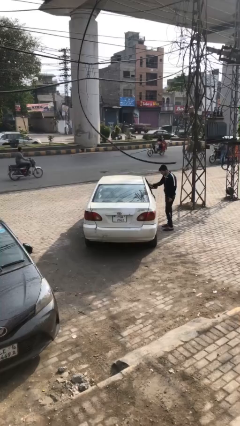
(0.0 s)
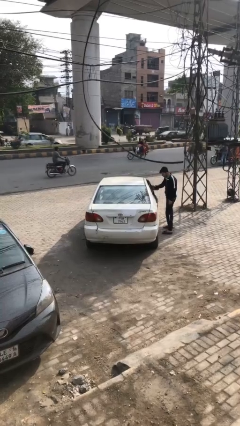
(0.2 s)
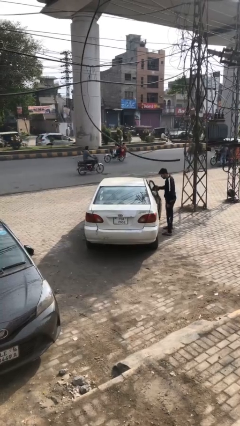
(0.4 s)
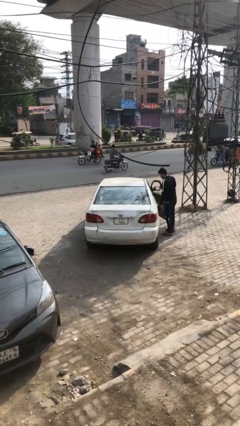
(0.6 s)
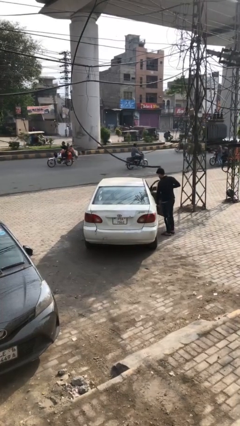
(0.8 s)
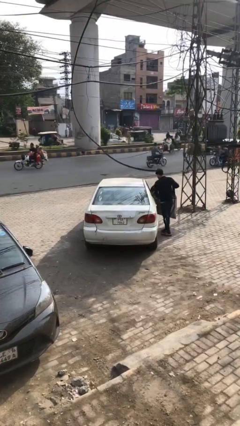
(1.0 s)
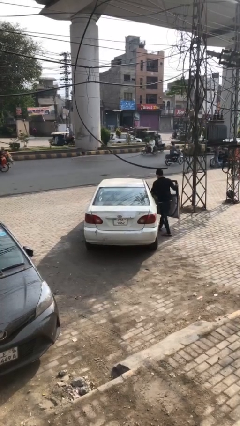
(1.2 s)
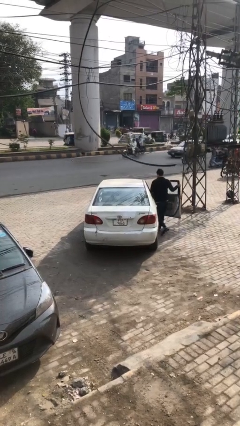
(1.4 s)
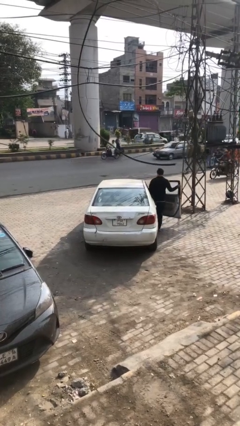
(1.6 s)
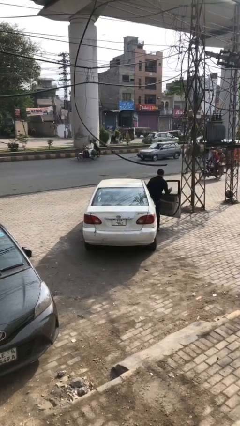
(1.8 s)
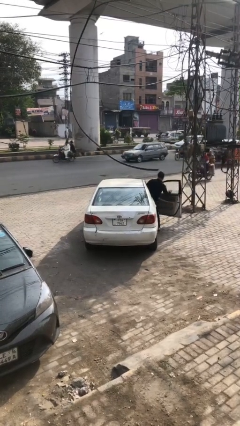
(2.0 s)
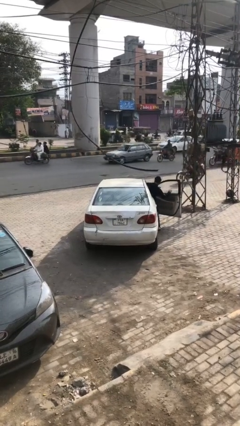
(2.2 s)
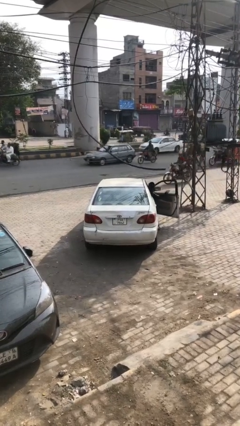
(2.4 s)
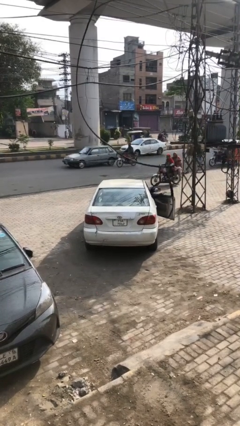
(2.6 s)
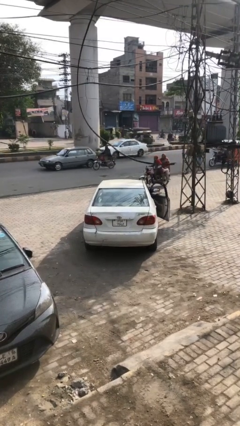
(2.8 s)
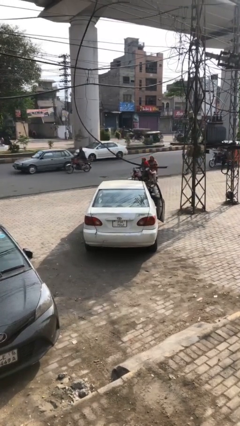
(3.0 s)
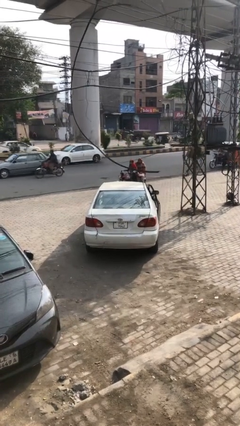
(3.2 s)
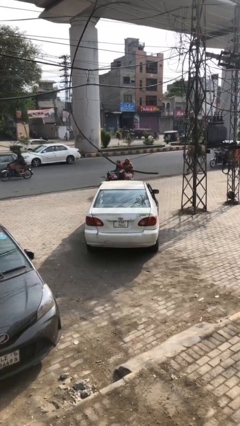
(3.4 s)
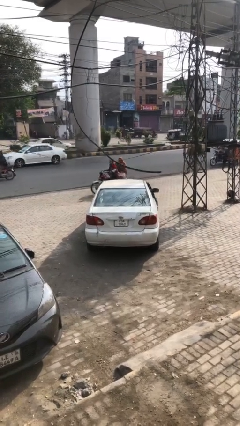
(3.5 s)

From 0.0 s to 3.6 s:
car picks up person

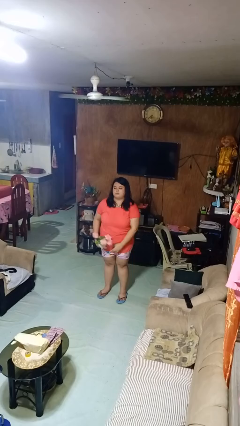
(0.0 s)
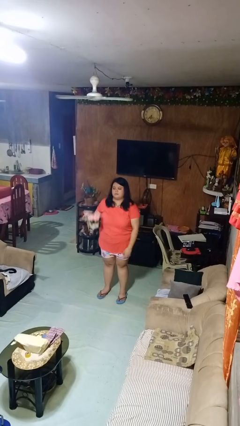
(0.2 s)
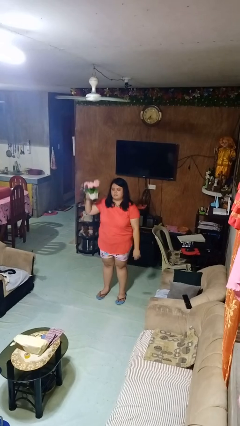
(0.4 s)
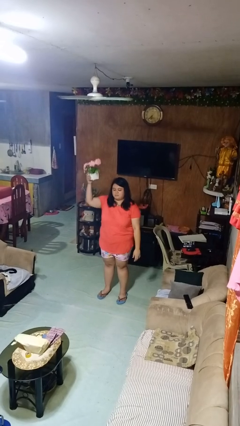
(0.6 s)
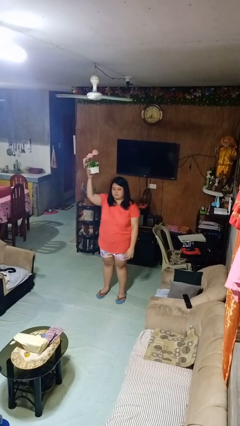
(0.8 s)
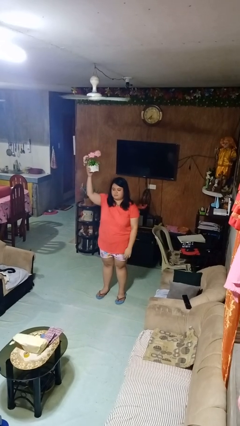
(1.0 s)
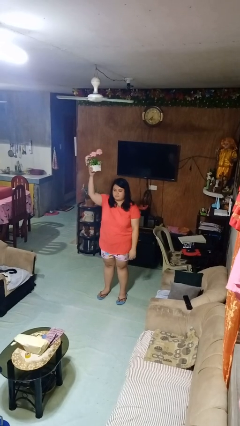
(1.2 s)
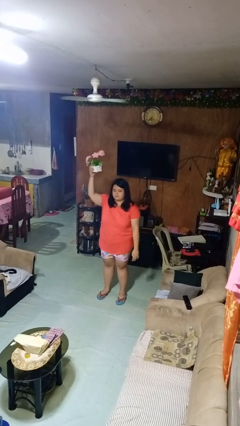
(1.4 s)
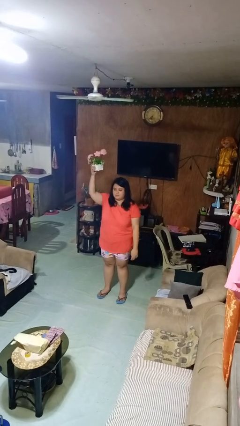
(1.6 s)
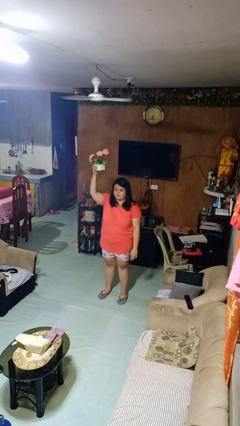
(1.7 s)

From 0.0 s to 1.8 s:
person holds object above head

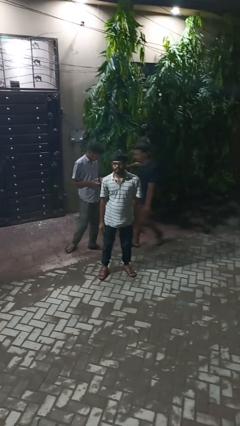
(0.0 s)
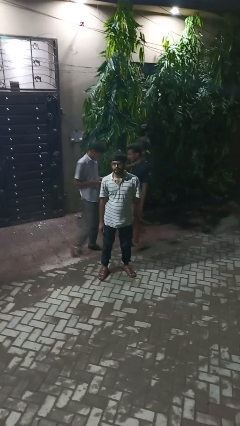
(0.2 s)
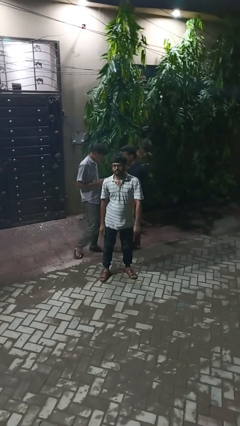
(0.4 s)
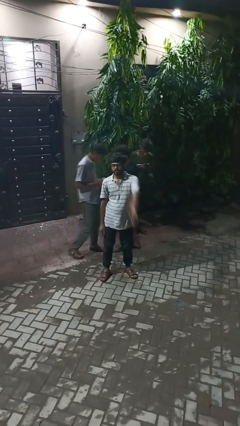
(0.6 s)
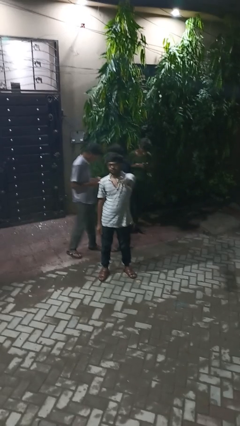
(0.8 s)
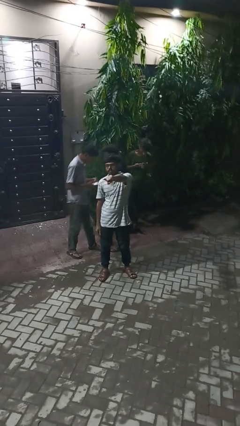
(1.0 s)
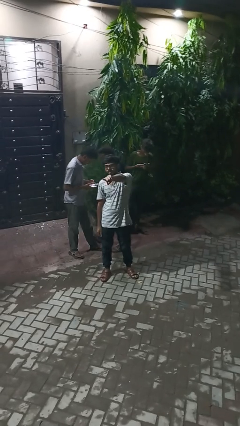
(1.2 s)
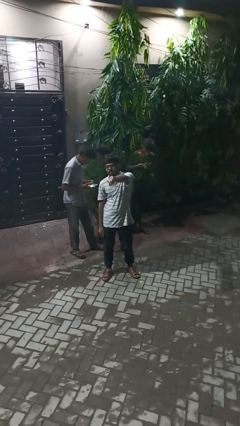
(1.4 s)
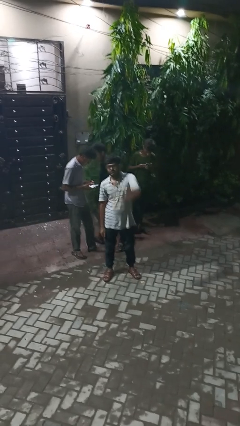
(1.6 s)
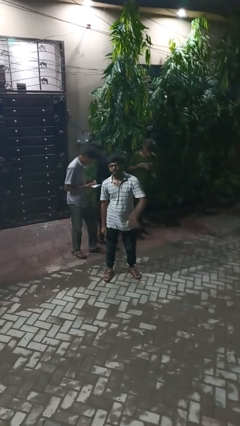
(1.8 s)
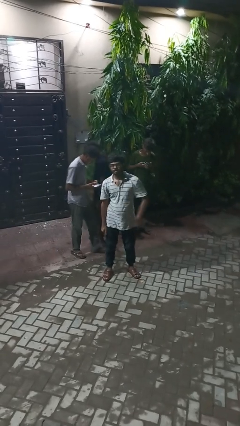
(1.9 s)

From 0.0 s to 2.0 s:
person points at person

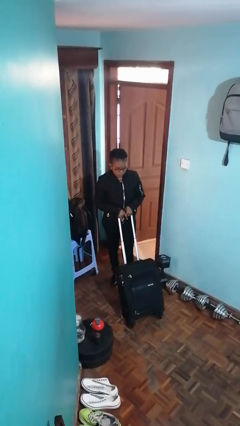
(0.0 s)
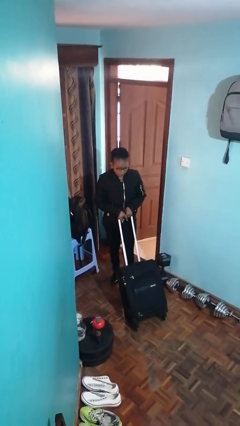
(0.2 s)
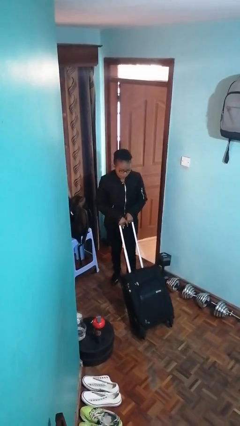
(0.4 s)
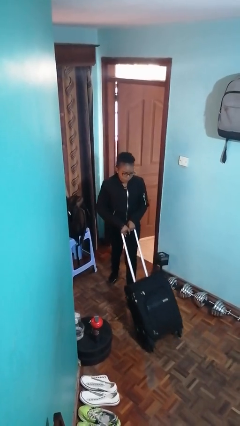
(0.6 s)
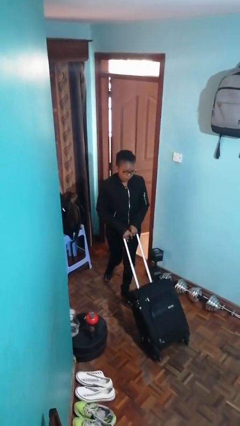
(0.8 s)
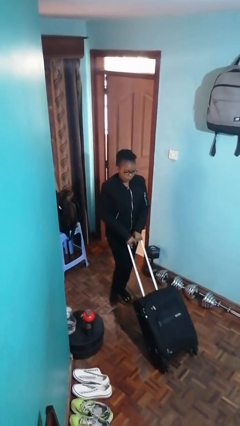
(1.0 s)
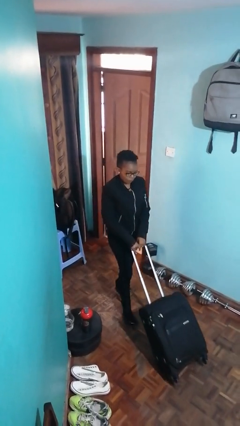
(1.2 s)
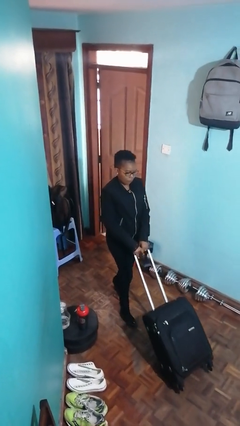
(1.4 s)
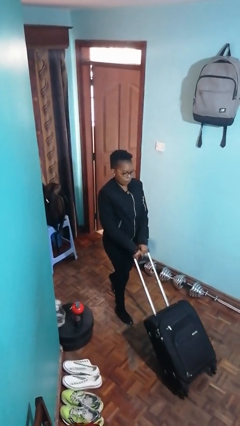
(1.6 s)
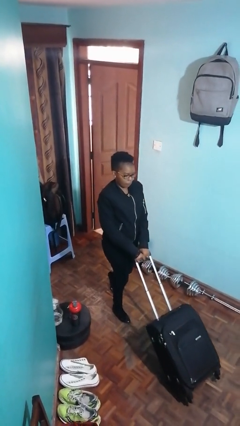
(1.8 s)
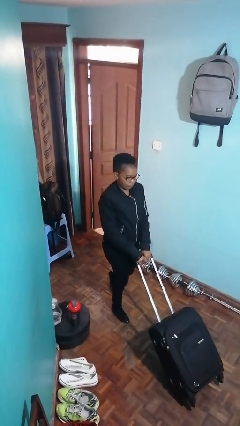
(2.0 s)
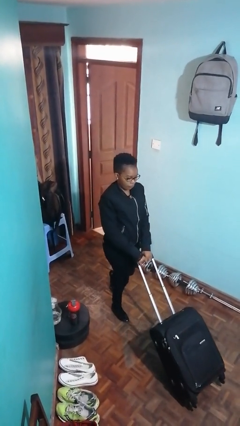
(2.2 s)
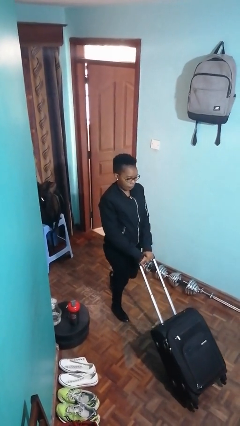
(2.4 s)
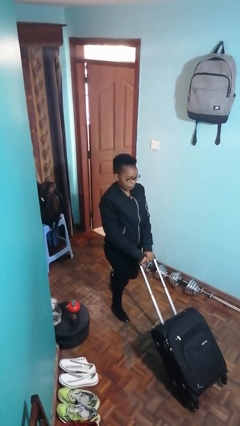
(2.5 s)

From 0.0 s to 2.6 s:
person pushes wheeled cart

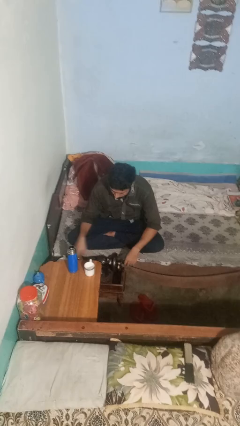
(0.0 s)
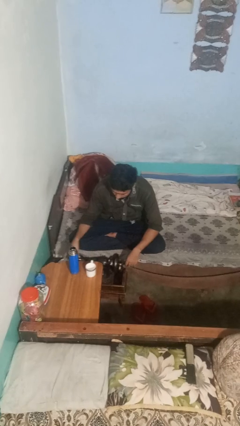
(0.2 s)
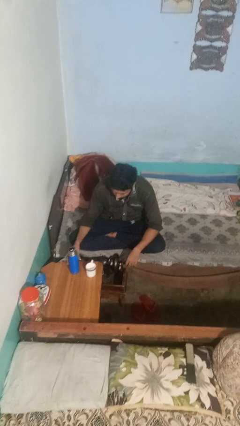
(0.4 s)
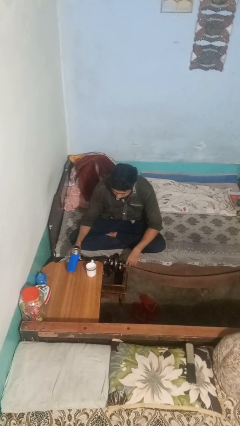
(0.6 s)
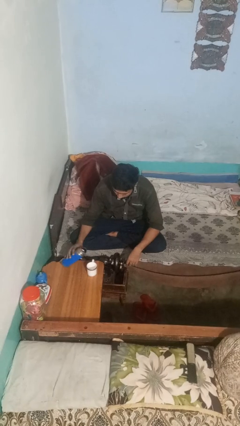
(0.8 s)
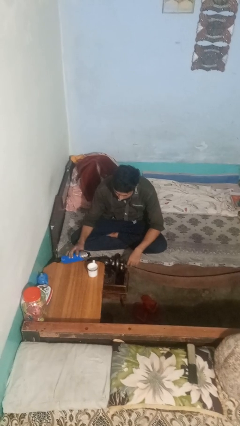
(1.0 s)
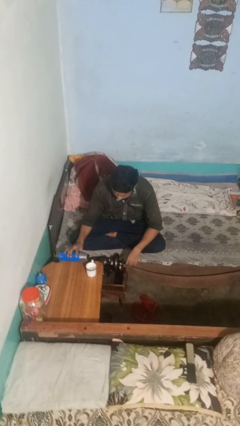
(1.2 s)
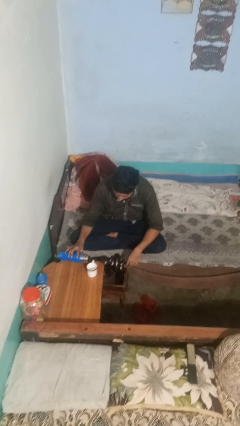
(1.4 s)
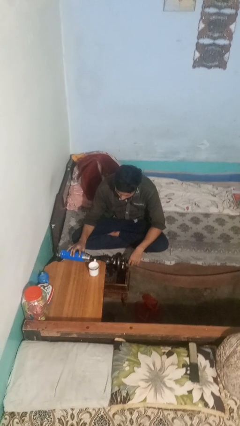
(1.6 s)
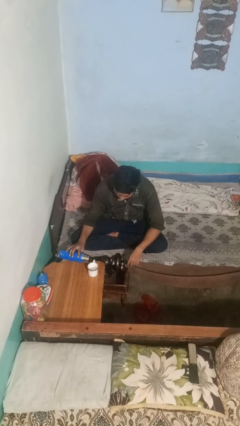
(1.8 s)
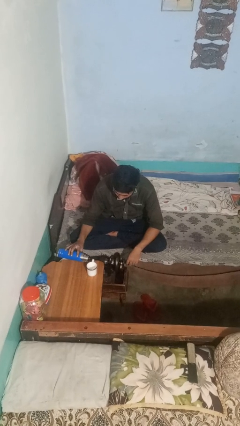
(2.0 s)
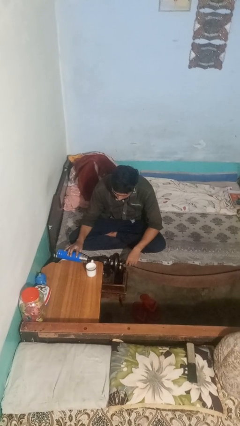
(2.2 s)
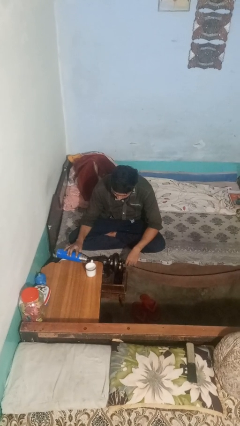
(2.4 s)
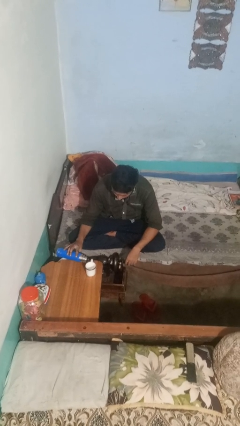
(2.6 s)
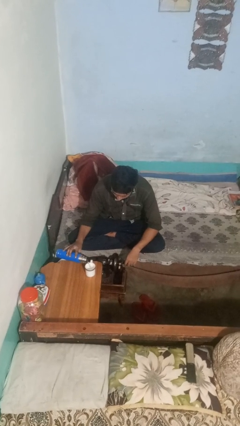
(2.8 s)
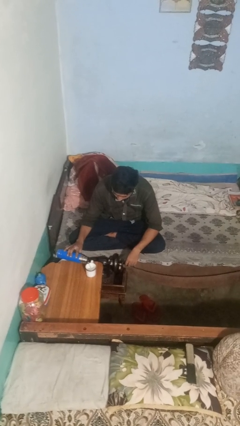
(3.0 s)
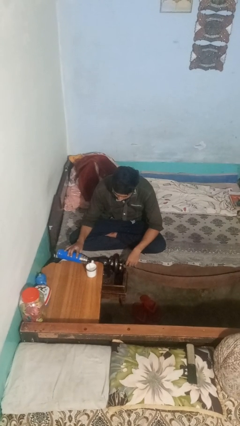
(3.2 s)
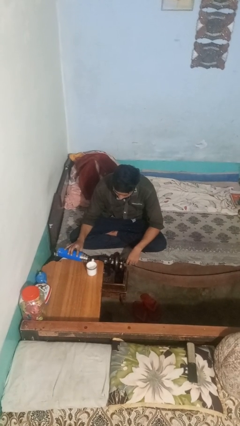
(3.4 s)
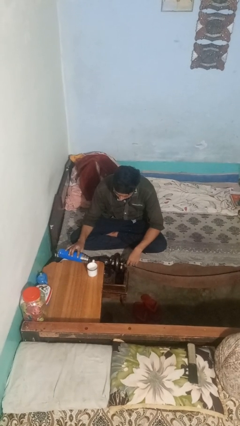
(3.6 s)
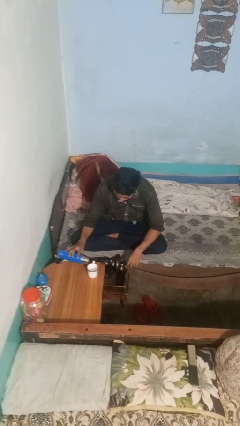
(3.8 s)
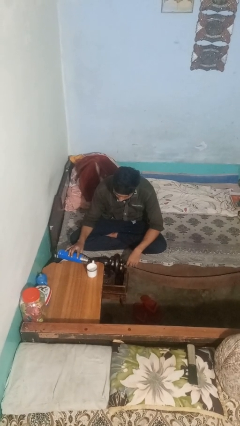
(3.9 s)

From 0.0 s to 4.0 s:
person pours liquid into cup

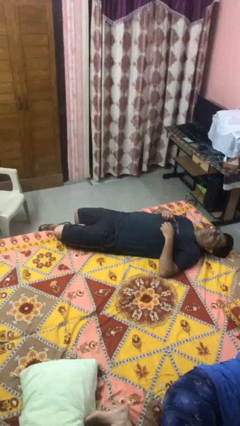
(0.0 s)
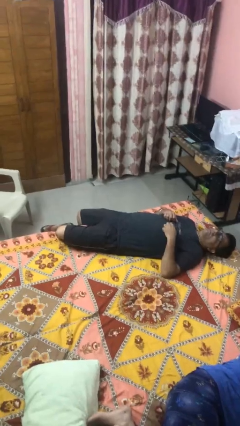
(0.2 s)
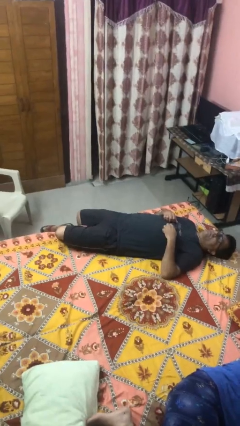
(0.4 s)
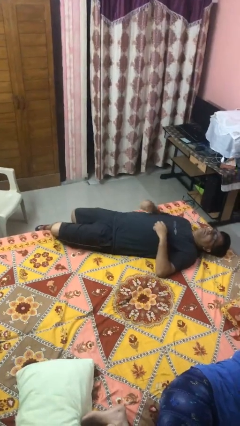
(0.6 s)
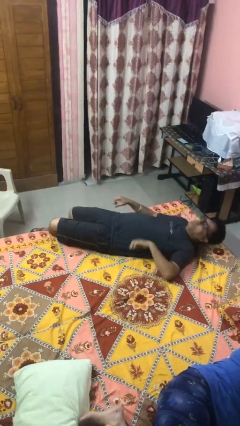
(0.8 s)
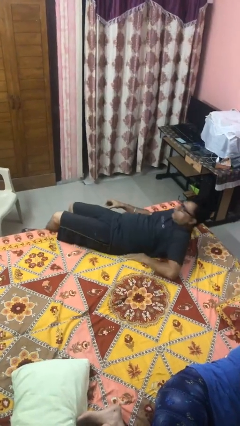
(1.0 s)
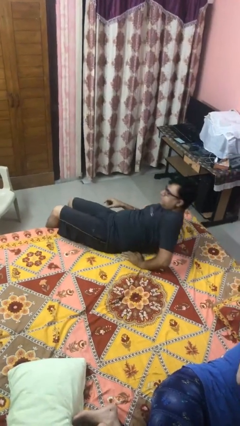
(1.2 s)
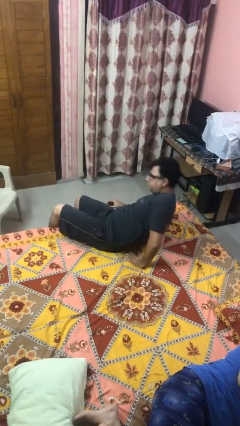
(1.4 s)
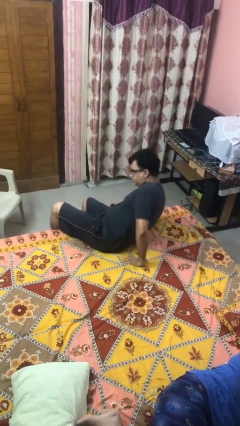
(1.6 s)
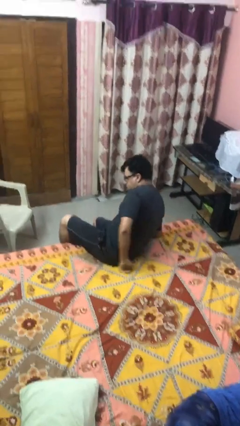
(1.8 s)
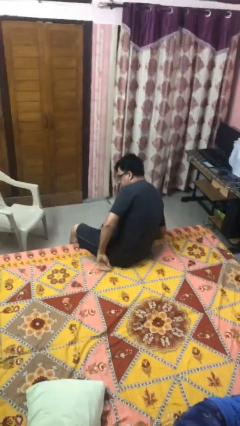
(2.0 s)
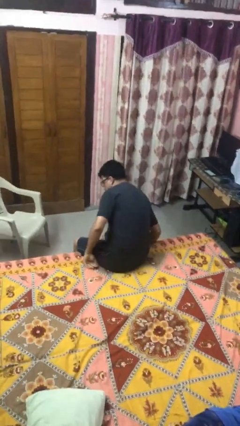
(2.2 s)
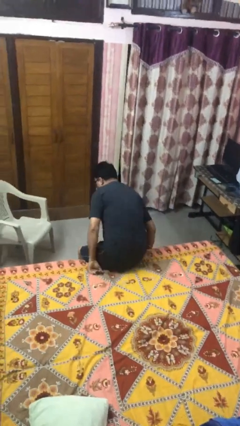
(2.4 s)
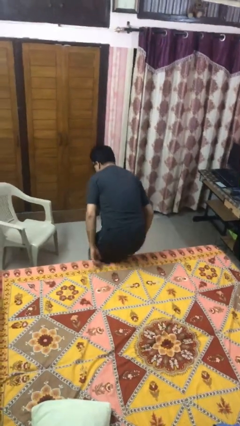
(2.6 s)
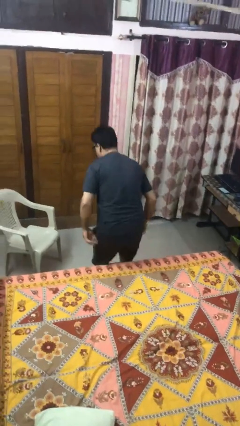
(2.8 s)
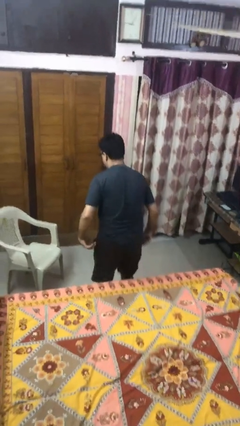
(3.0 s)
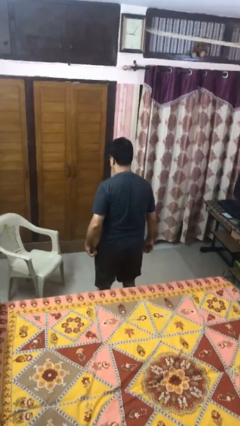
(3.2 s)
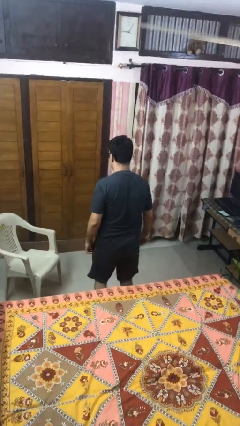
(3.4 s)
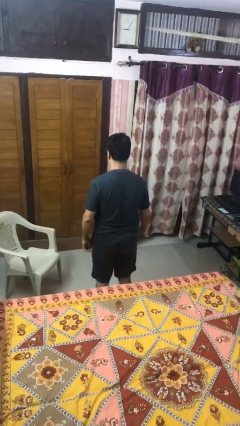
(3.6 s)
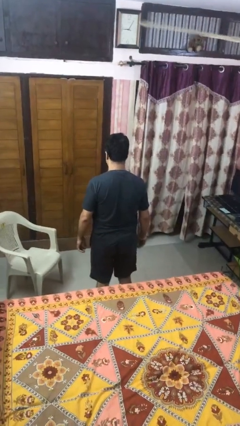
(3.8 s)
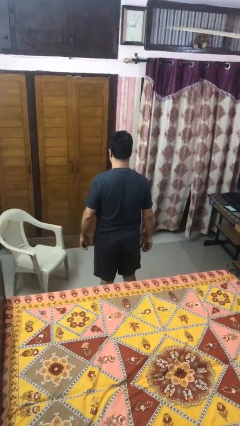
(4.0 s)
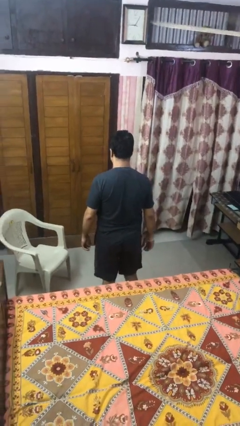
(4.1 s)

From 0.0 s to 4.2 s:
person stands up
